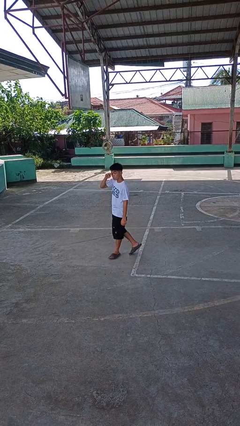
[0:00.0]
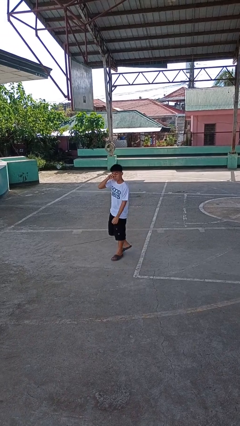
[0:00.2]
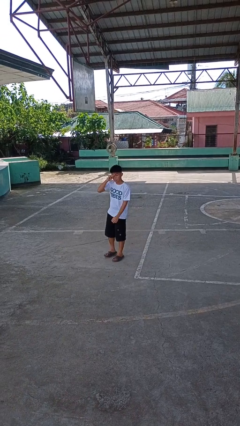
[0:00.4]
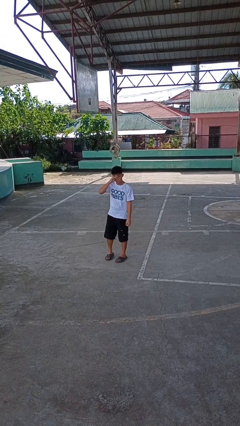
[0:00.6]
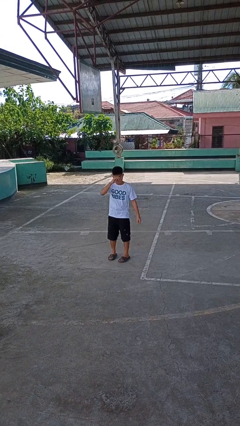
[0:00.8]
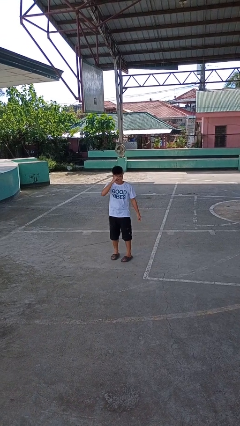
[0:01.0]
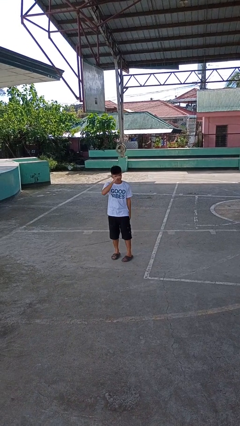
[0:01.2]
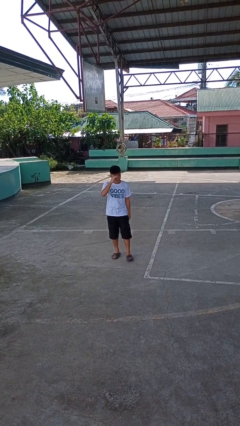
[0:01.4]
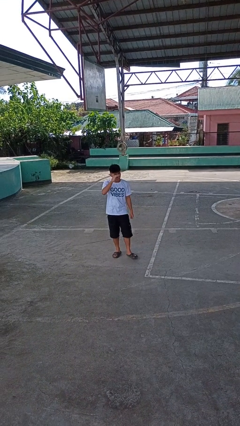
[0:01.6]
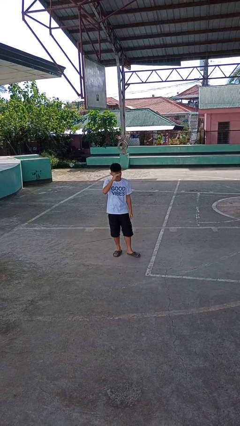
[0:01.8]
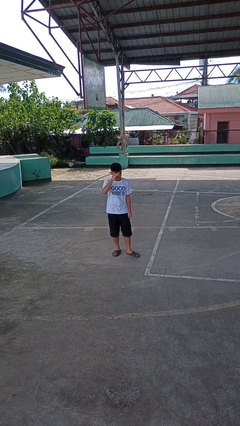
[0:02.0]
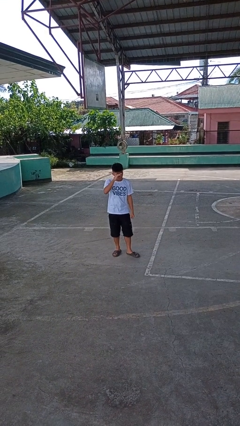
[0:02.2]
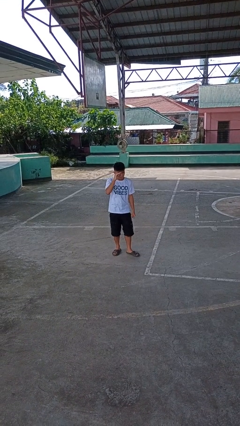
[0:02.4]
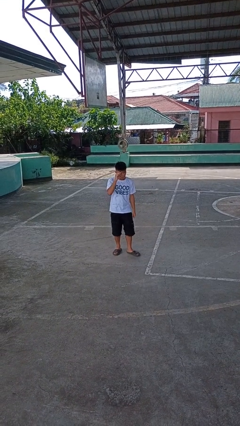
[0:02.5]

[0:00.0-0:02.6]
person rubs eyes

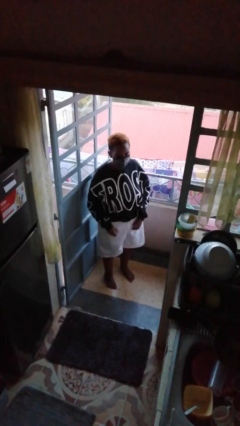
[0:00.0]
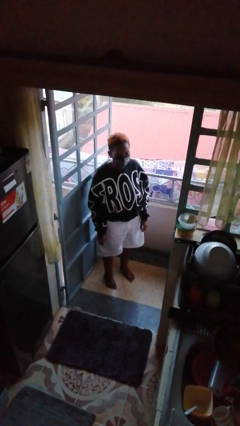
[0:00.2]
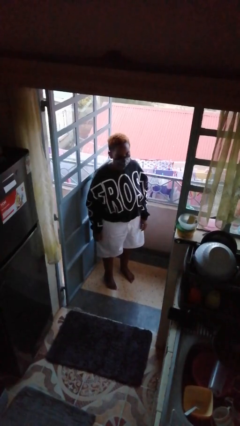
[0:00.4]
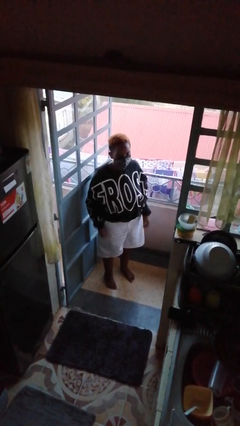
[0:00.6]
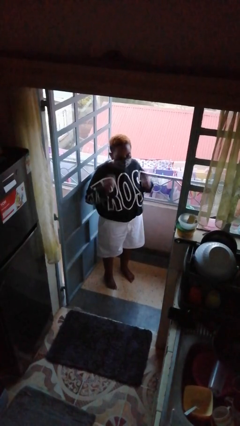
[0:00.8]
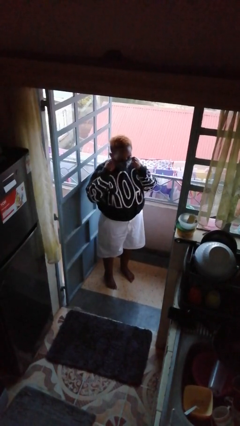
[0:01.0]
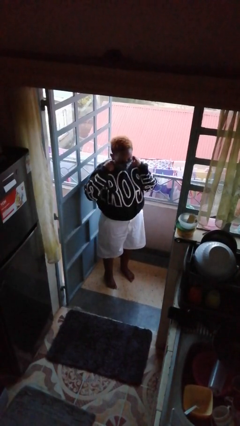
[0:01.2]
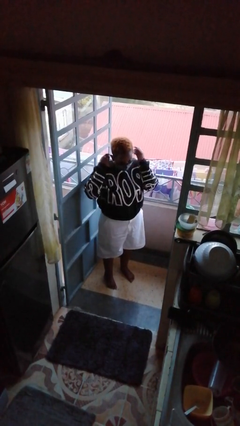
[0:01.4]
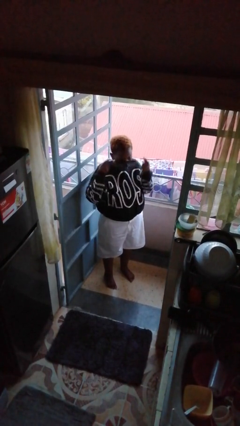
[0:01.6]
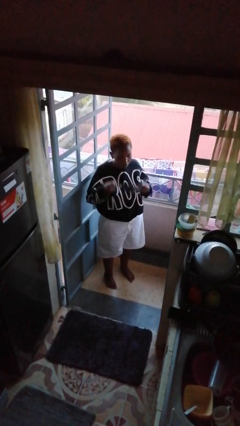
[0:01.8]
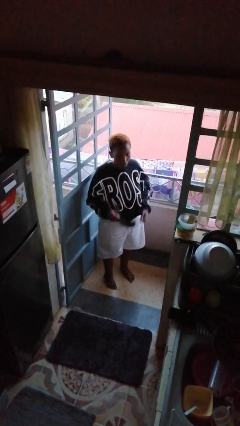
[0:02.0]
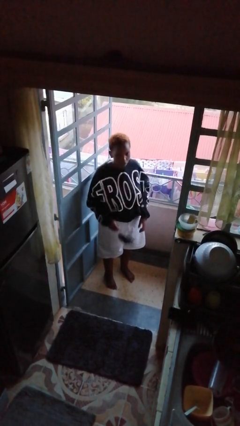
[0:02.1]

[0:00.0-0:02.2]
person takes off facemask

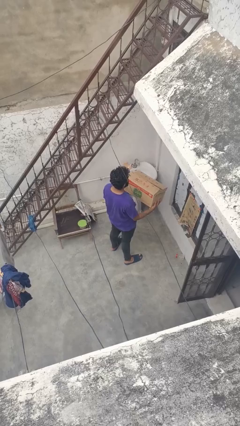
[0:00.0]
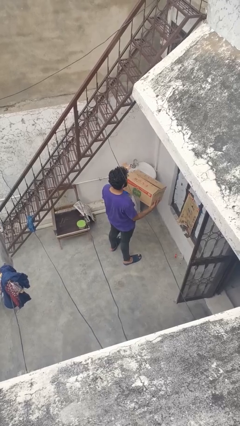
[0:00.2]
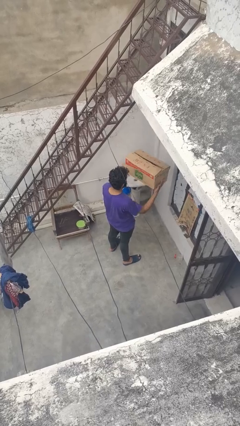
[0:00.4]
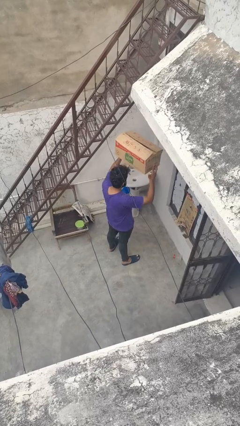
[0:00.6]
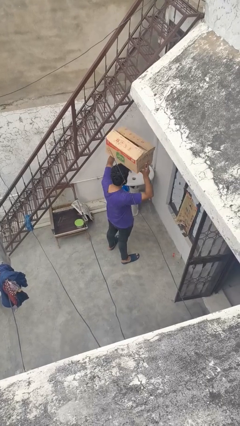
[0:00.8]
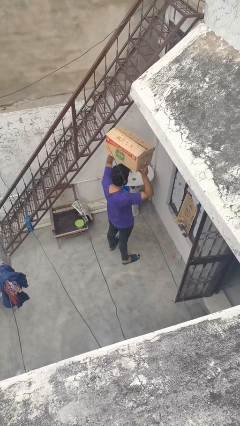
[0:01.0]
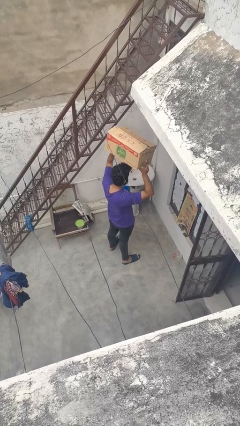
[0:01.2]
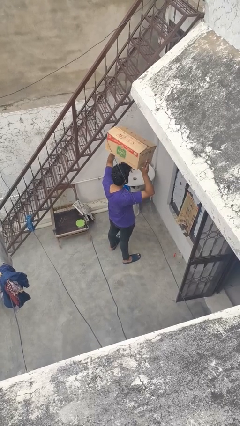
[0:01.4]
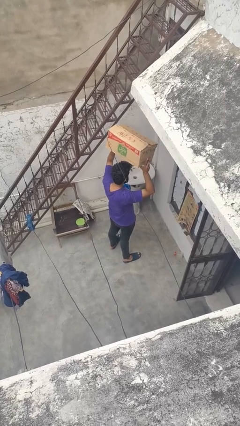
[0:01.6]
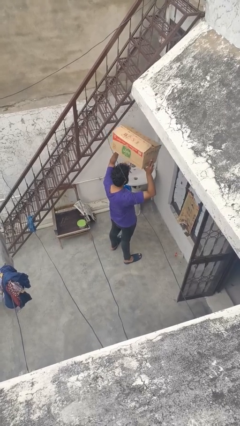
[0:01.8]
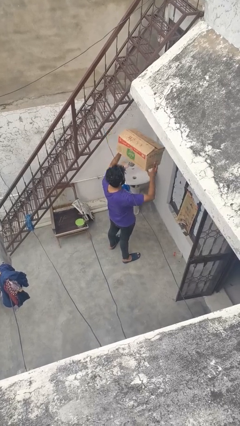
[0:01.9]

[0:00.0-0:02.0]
person holds object above head

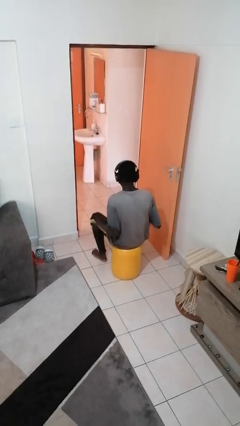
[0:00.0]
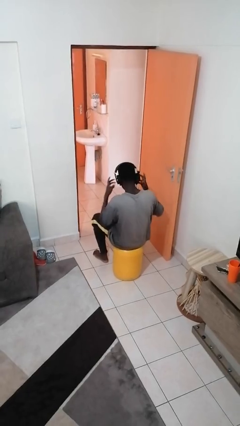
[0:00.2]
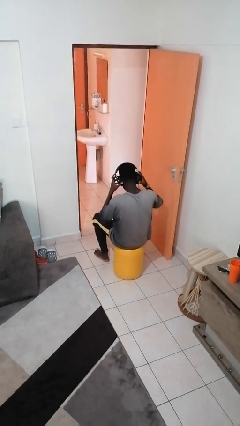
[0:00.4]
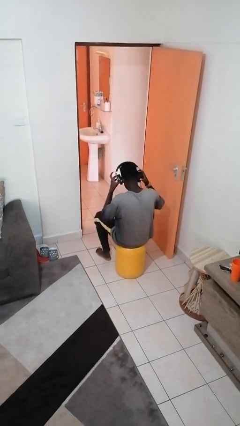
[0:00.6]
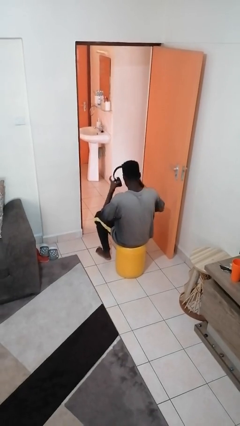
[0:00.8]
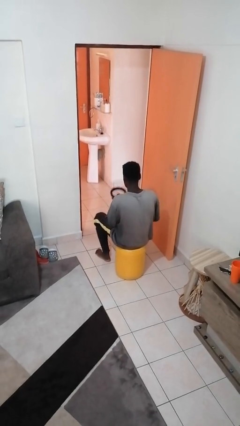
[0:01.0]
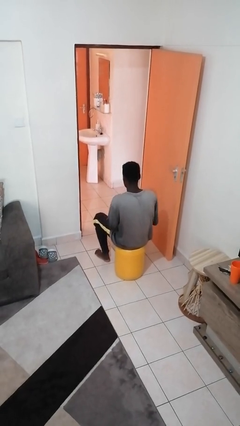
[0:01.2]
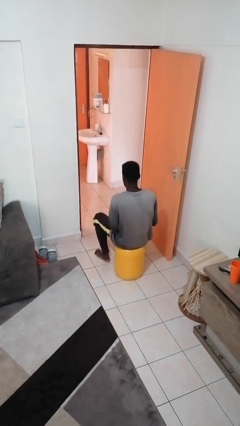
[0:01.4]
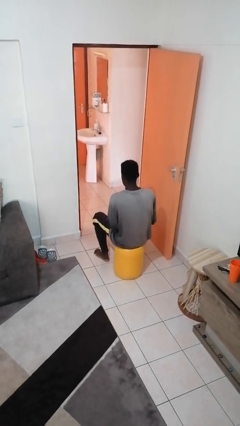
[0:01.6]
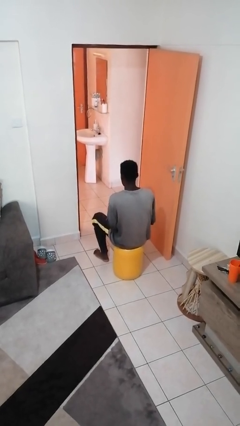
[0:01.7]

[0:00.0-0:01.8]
person takes off headphones

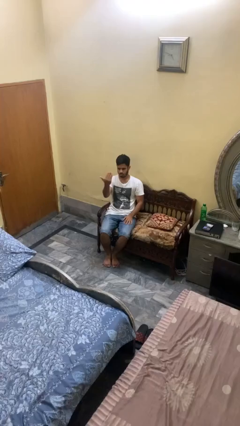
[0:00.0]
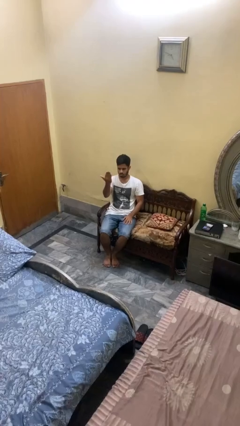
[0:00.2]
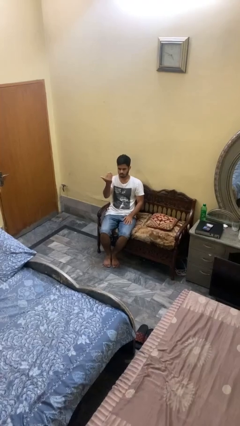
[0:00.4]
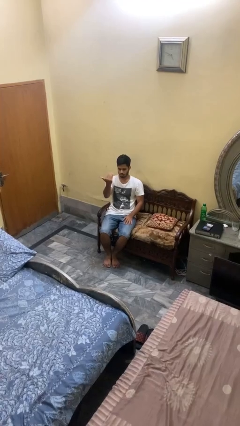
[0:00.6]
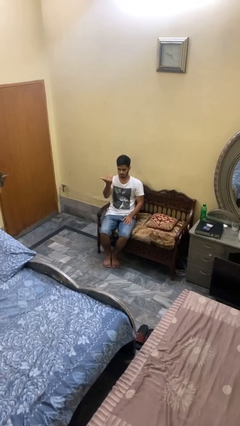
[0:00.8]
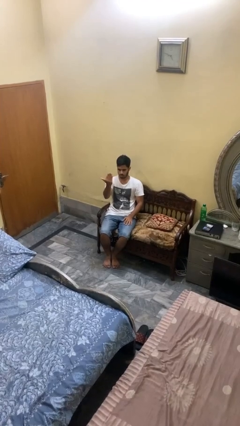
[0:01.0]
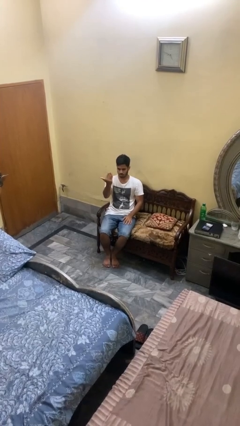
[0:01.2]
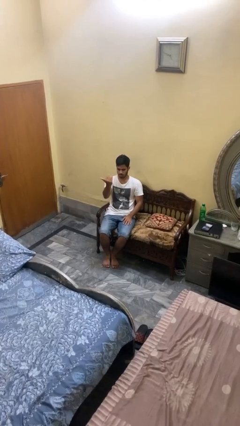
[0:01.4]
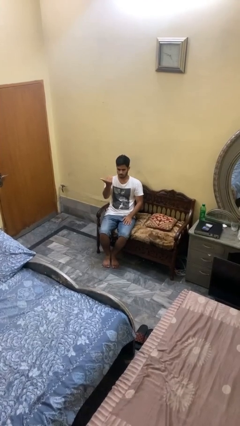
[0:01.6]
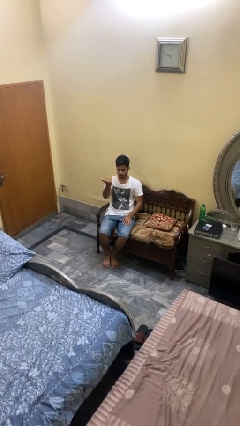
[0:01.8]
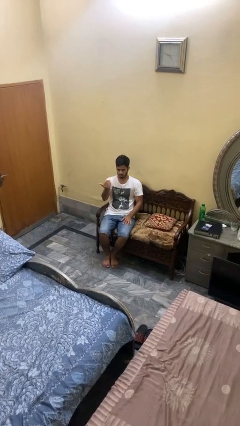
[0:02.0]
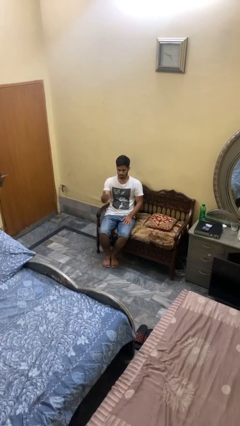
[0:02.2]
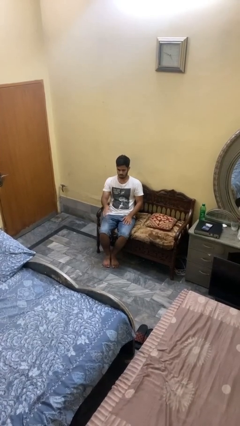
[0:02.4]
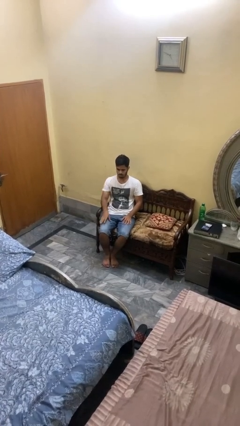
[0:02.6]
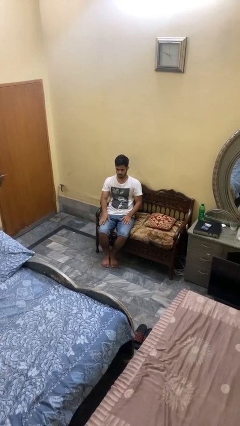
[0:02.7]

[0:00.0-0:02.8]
person gestures come here

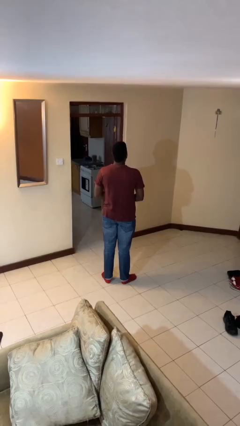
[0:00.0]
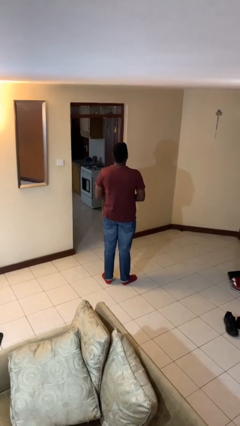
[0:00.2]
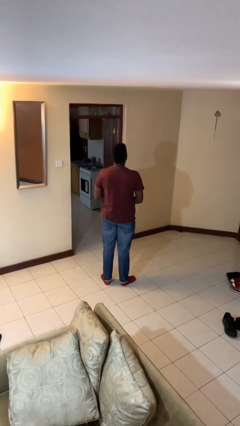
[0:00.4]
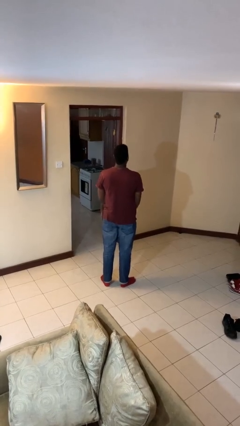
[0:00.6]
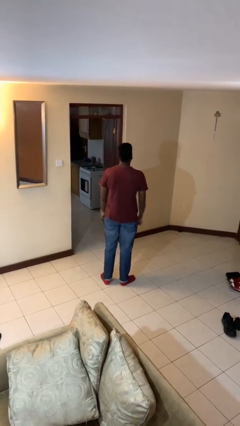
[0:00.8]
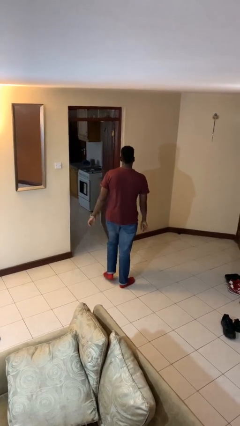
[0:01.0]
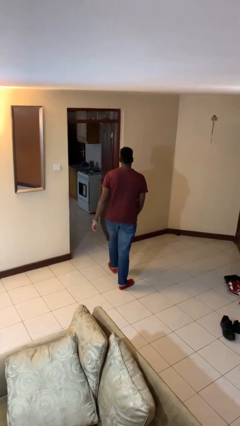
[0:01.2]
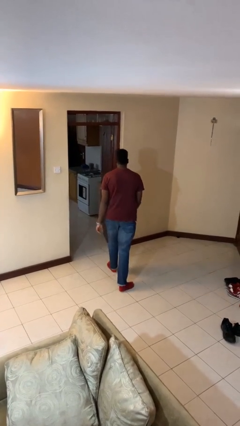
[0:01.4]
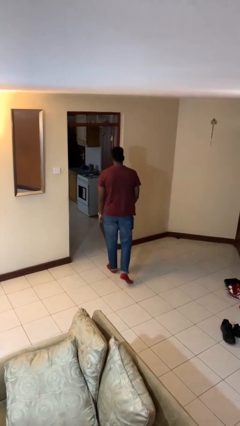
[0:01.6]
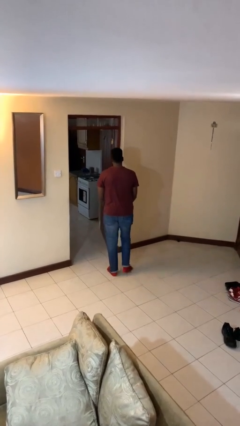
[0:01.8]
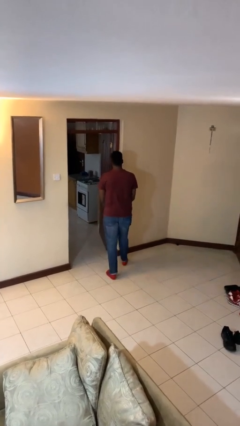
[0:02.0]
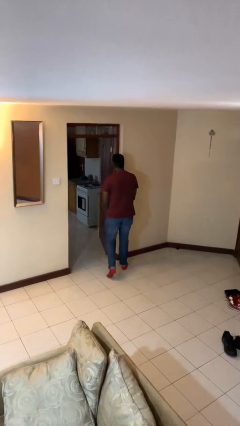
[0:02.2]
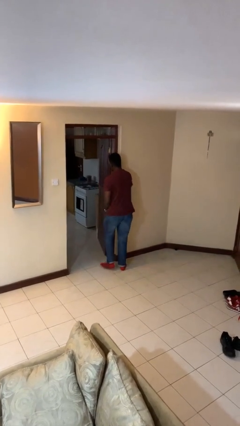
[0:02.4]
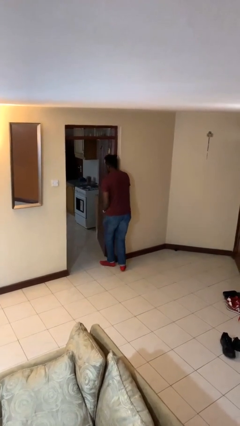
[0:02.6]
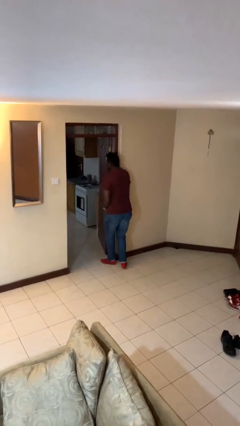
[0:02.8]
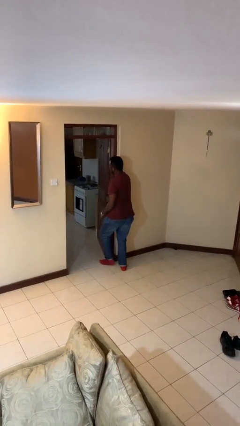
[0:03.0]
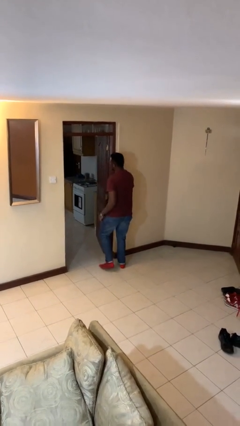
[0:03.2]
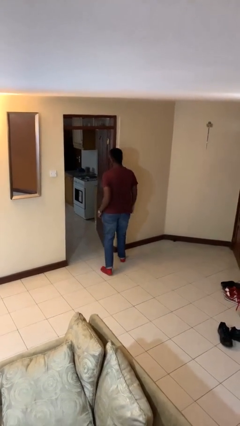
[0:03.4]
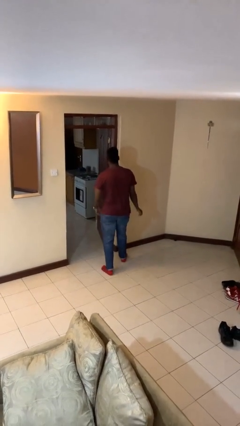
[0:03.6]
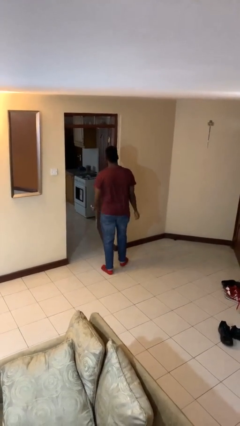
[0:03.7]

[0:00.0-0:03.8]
person bumps into wall

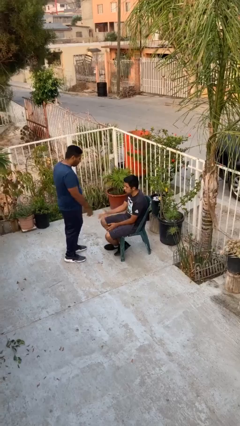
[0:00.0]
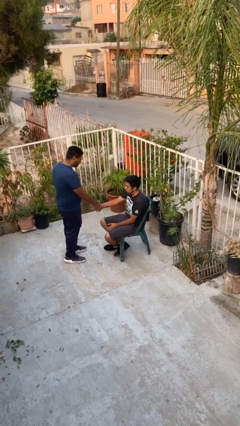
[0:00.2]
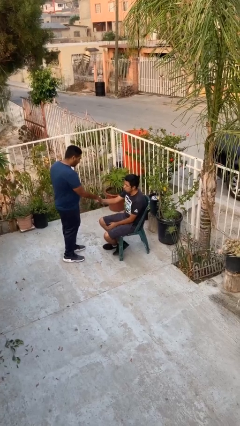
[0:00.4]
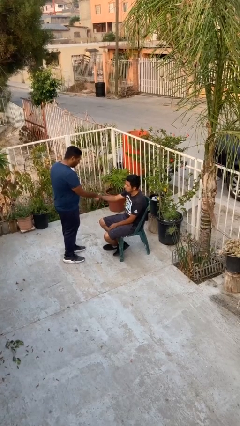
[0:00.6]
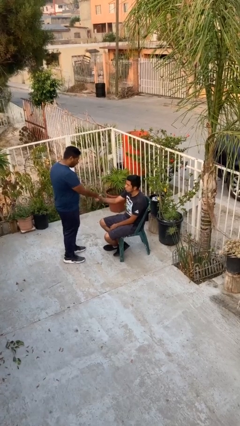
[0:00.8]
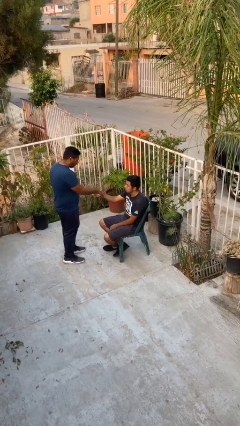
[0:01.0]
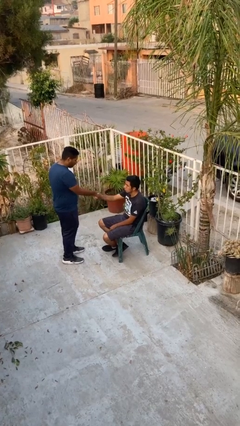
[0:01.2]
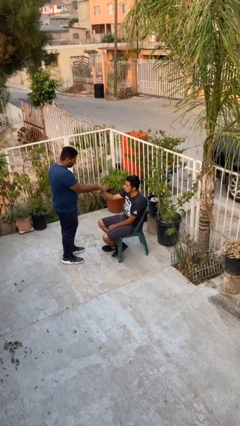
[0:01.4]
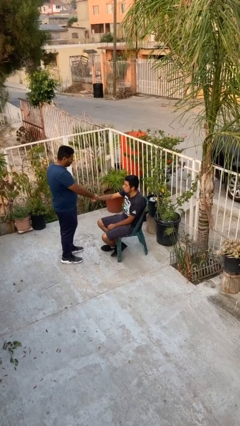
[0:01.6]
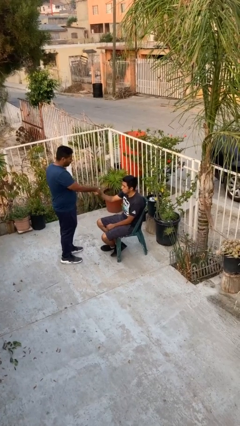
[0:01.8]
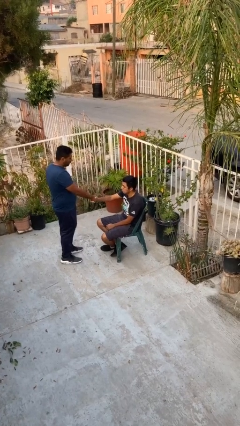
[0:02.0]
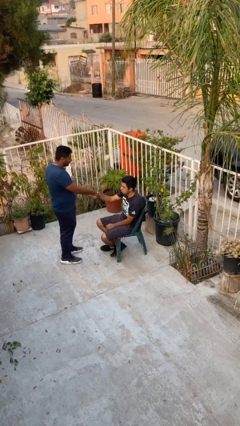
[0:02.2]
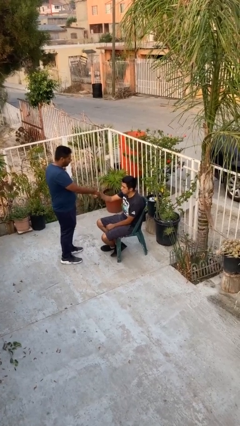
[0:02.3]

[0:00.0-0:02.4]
person shakes hand
